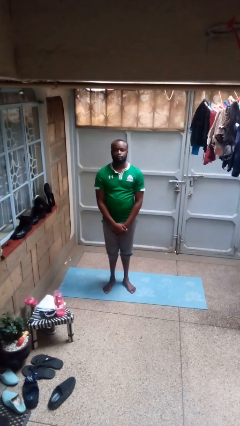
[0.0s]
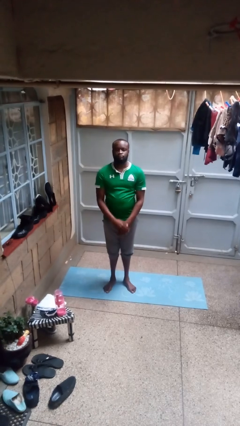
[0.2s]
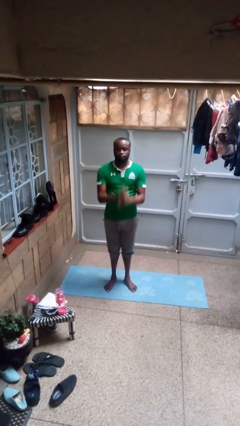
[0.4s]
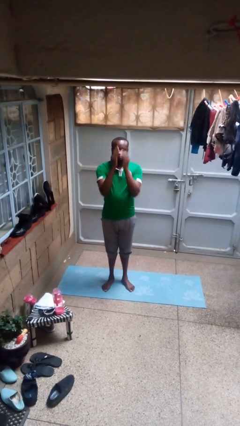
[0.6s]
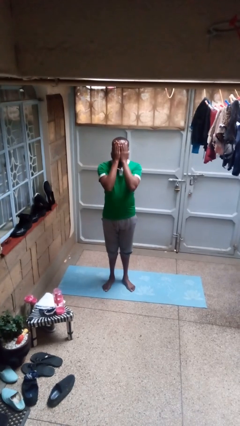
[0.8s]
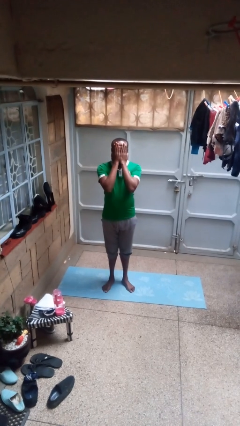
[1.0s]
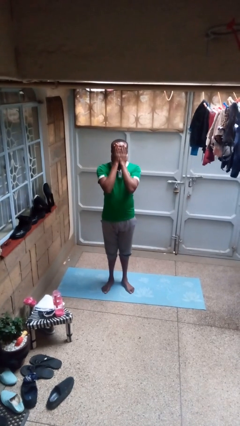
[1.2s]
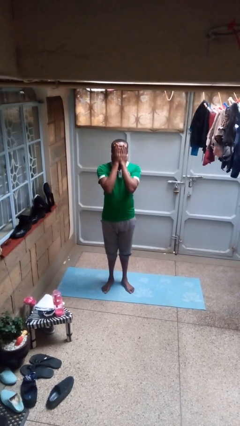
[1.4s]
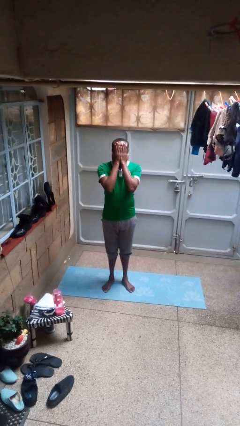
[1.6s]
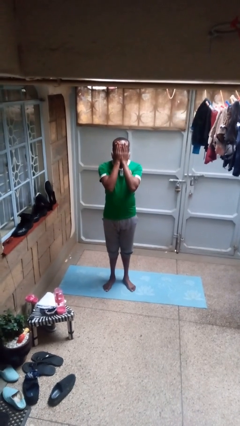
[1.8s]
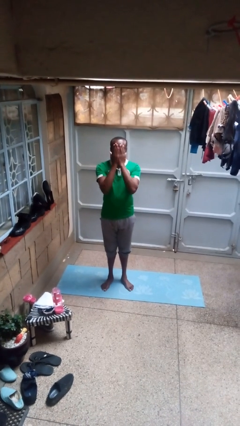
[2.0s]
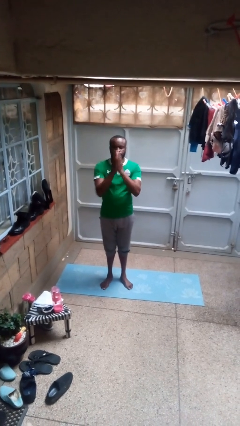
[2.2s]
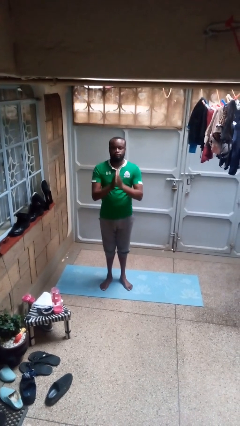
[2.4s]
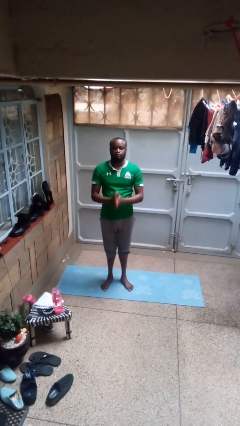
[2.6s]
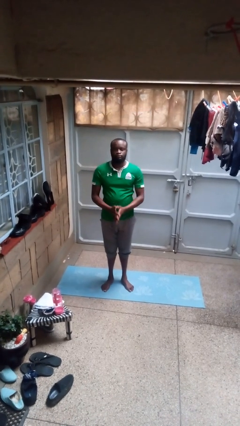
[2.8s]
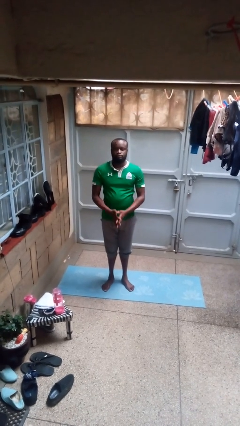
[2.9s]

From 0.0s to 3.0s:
person covers face with hands

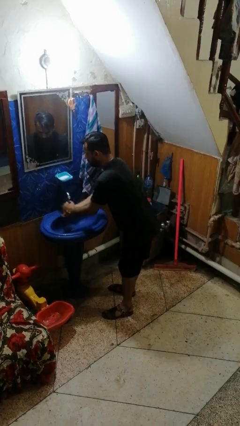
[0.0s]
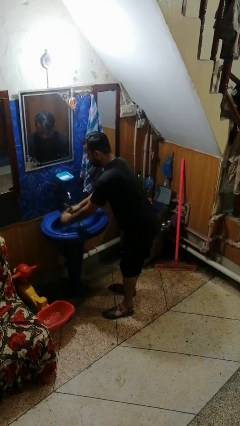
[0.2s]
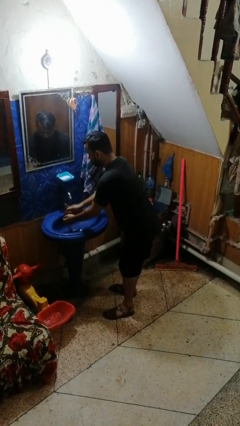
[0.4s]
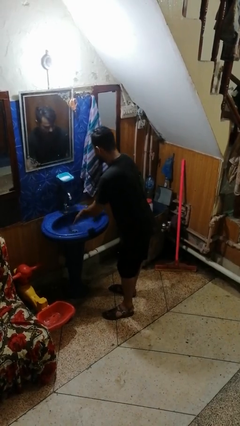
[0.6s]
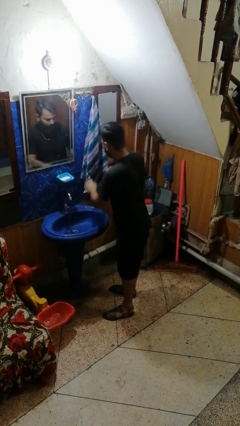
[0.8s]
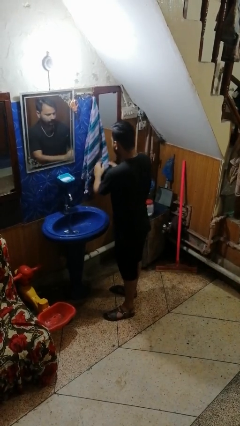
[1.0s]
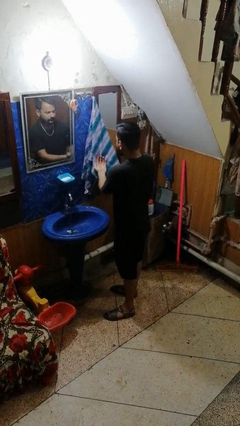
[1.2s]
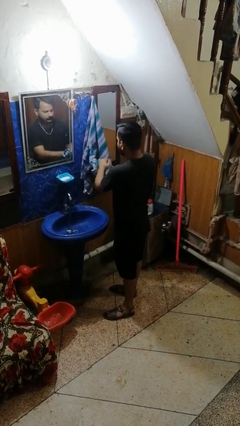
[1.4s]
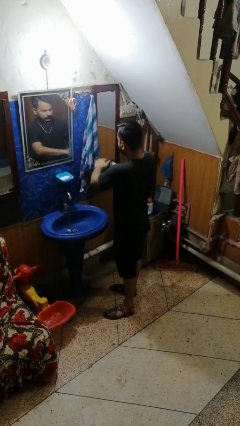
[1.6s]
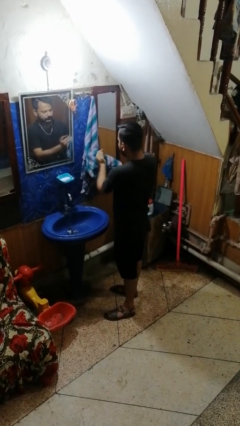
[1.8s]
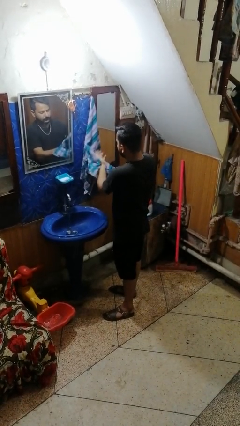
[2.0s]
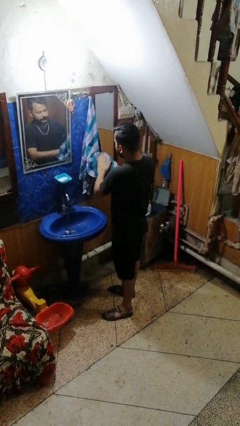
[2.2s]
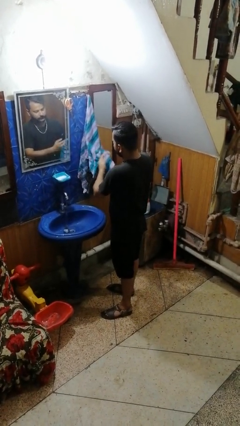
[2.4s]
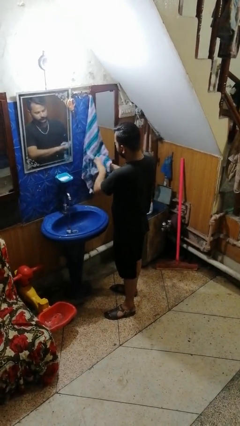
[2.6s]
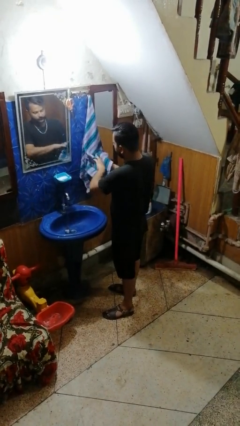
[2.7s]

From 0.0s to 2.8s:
person dries hands with towel

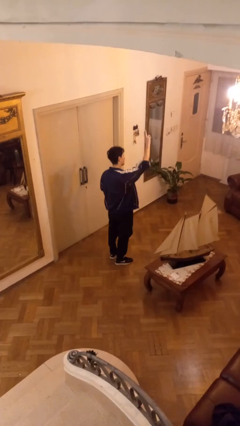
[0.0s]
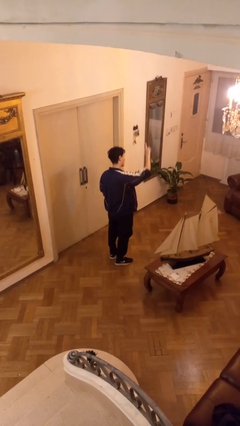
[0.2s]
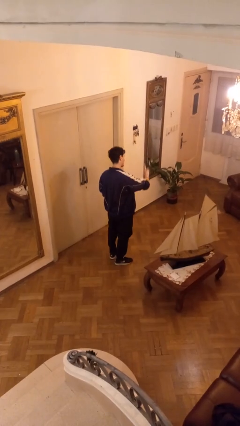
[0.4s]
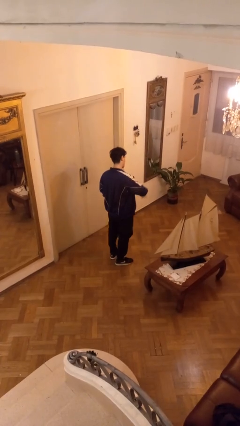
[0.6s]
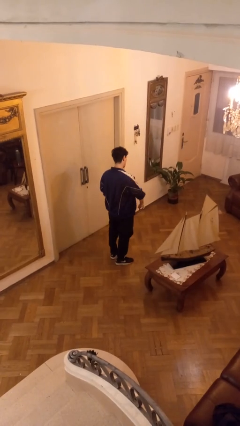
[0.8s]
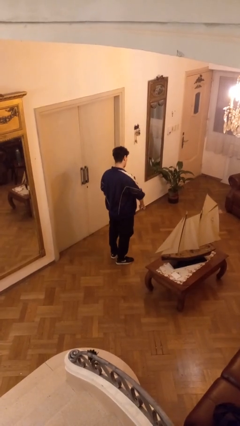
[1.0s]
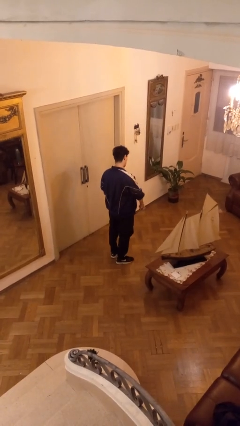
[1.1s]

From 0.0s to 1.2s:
person gestures swipe down

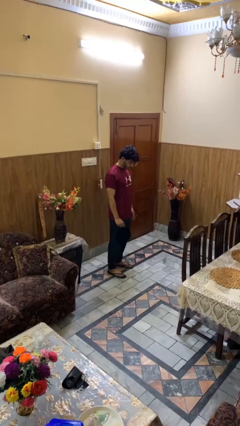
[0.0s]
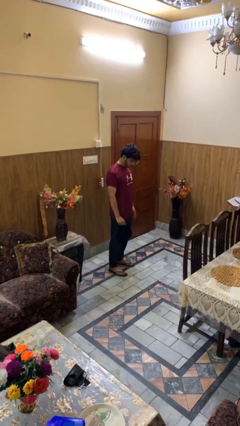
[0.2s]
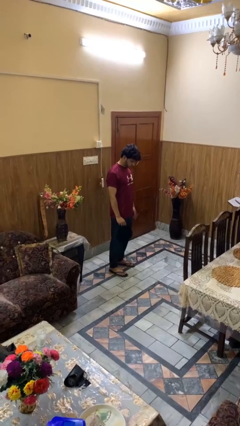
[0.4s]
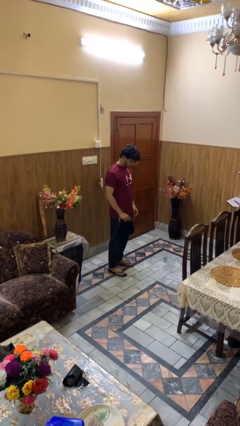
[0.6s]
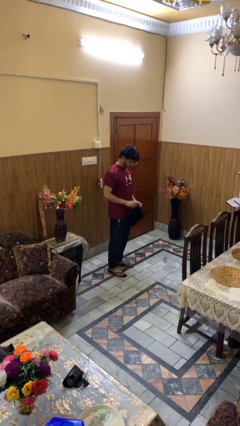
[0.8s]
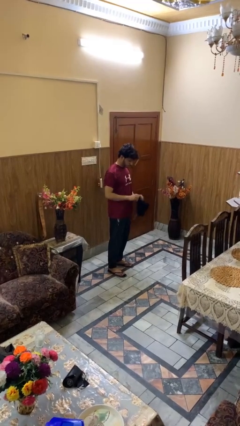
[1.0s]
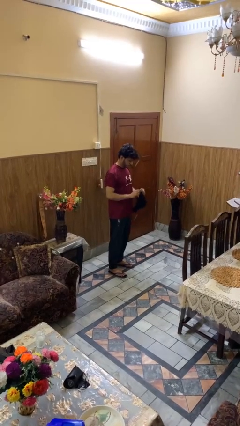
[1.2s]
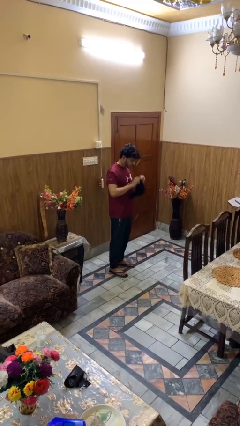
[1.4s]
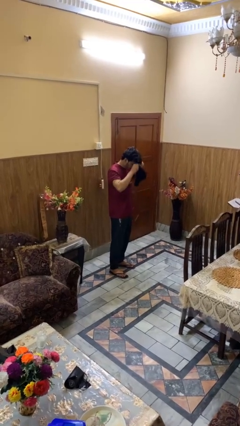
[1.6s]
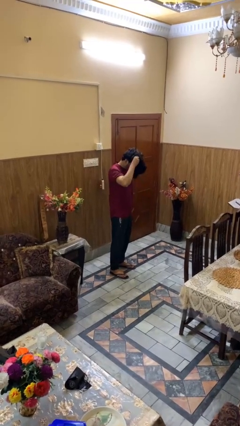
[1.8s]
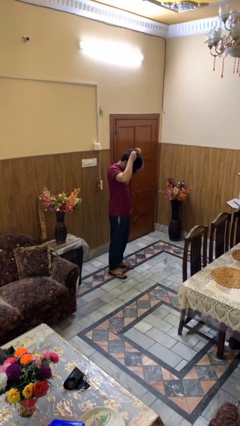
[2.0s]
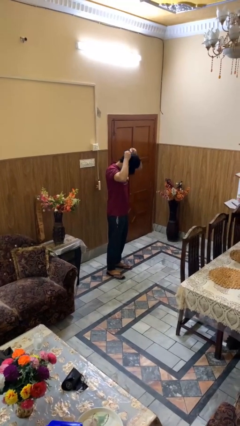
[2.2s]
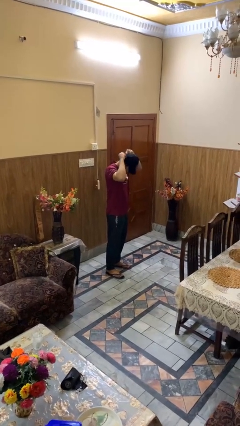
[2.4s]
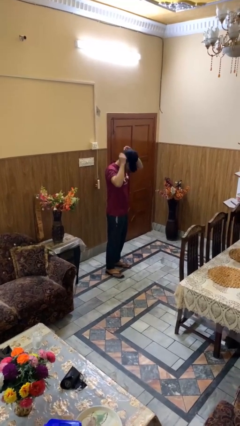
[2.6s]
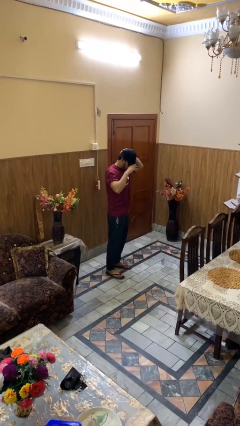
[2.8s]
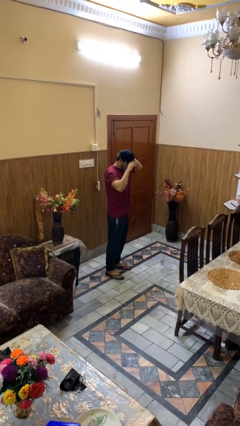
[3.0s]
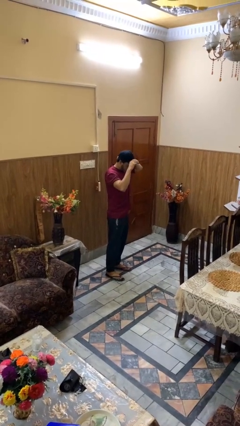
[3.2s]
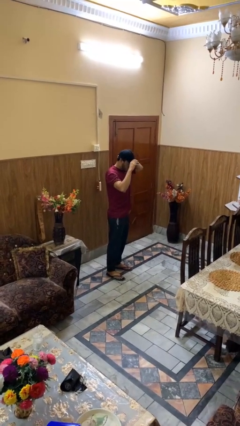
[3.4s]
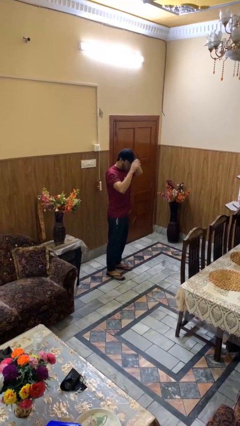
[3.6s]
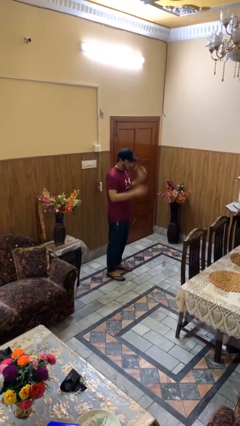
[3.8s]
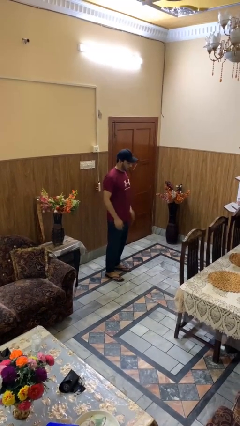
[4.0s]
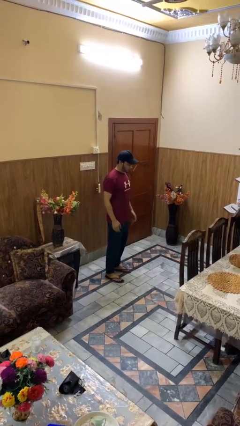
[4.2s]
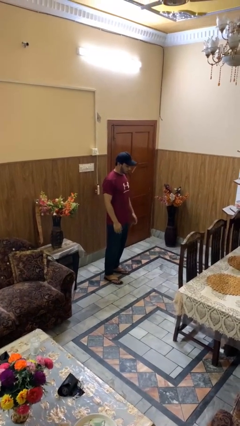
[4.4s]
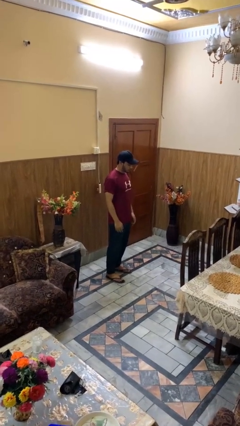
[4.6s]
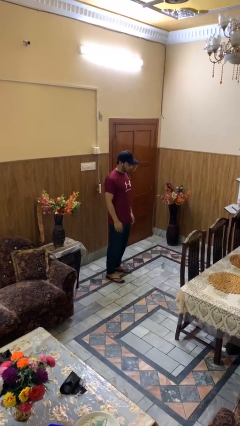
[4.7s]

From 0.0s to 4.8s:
person puts on hat

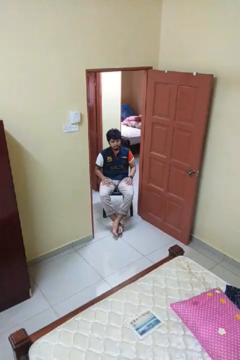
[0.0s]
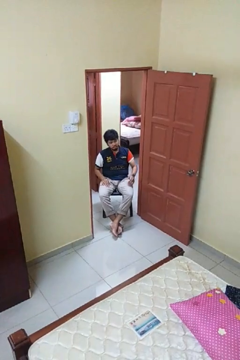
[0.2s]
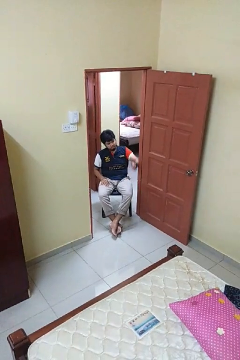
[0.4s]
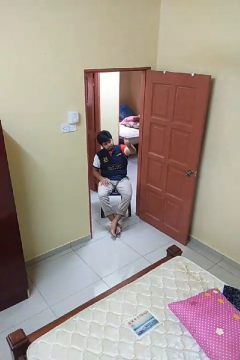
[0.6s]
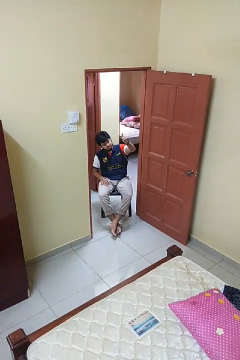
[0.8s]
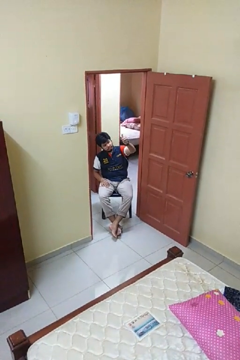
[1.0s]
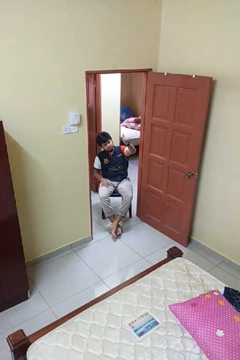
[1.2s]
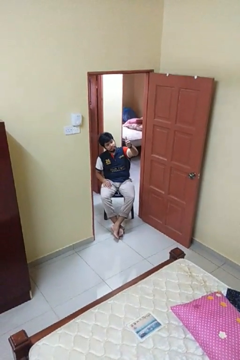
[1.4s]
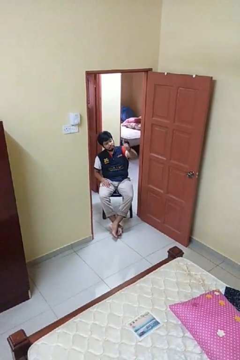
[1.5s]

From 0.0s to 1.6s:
person gestures thumbs up

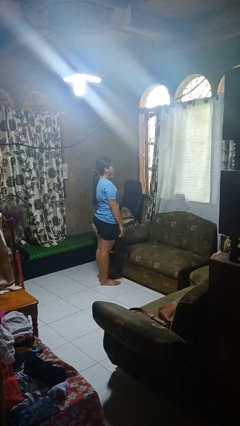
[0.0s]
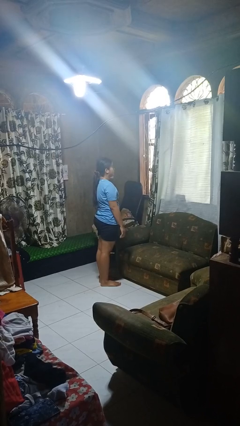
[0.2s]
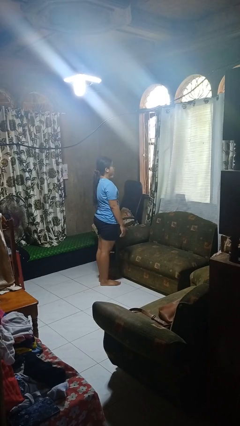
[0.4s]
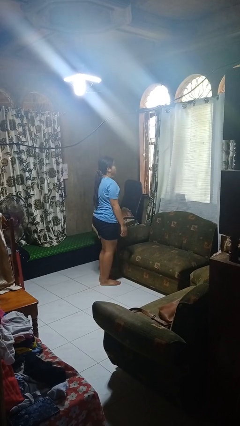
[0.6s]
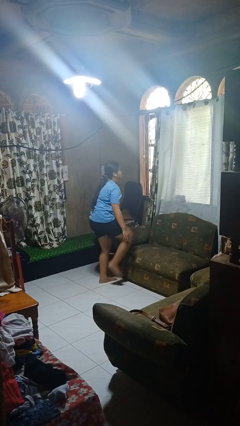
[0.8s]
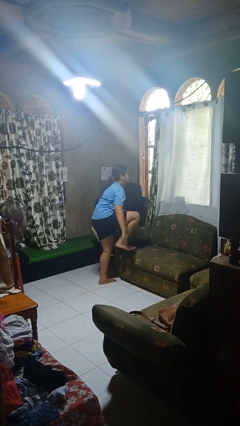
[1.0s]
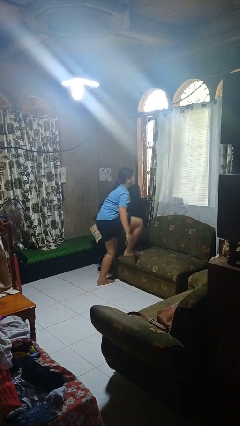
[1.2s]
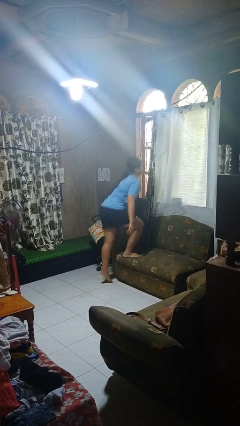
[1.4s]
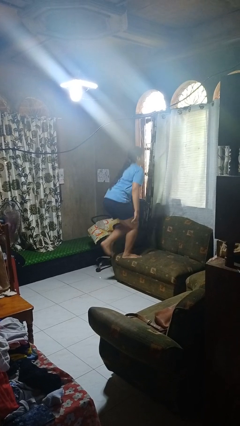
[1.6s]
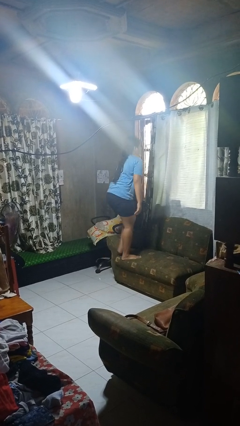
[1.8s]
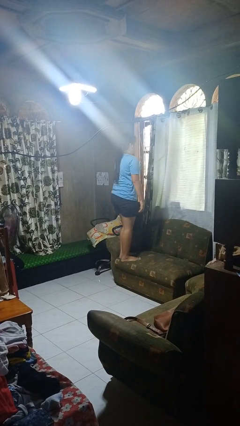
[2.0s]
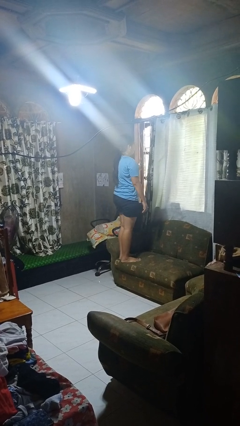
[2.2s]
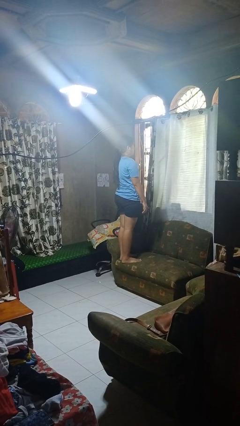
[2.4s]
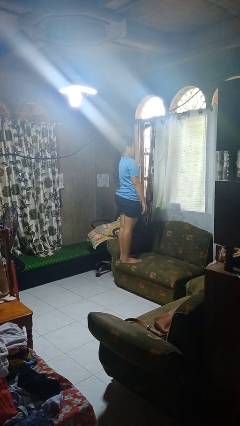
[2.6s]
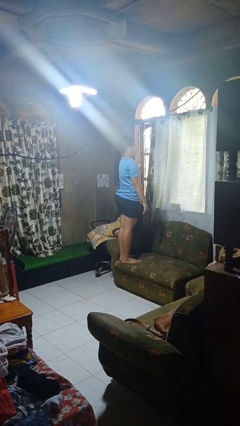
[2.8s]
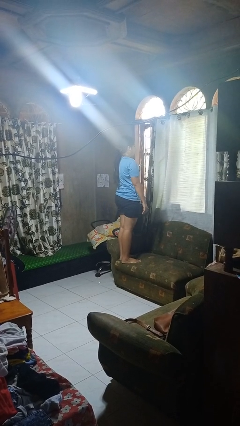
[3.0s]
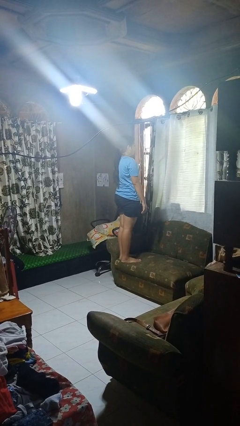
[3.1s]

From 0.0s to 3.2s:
person climbs on couch

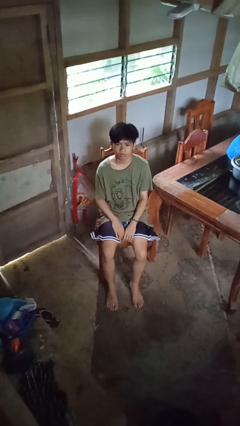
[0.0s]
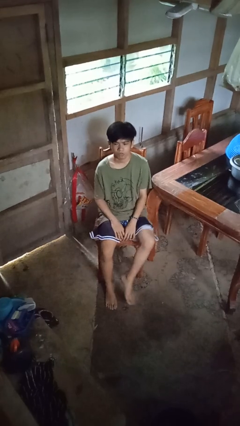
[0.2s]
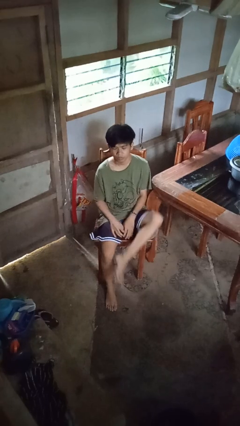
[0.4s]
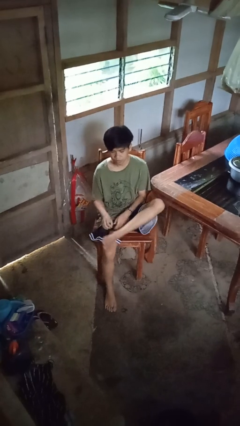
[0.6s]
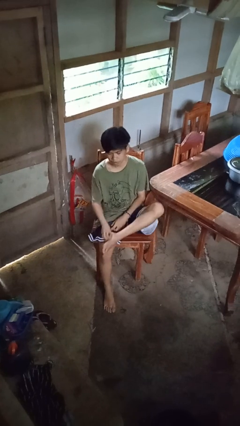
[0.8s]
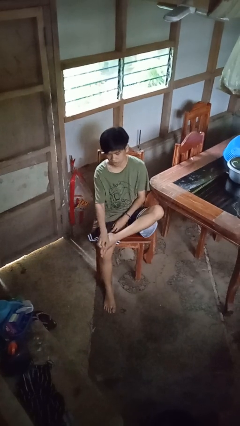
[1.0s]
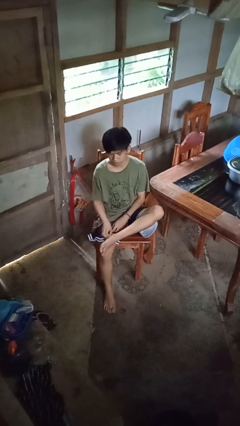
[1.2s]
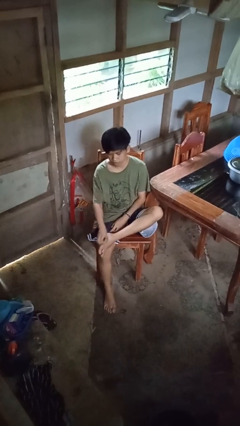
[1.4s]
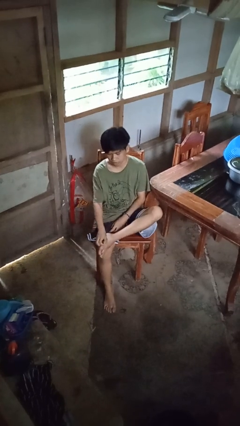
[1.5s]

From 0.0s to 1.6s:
person rubs foot
